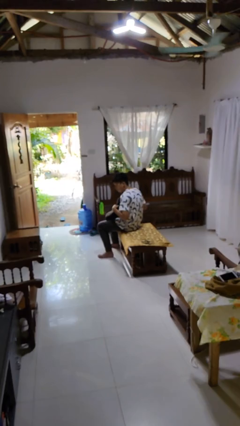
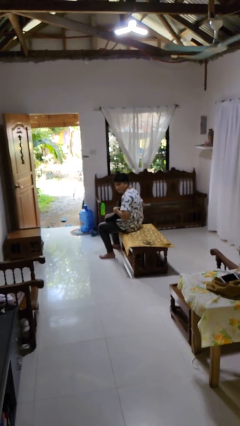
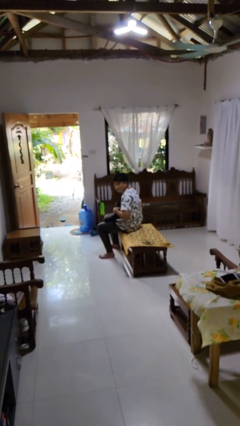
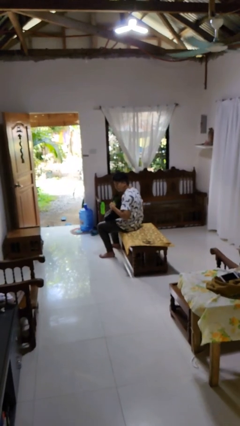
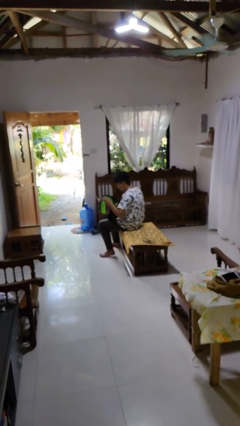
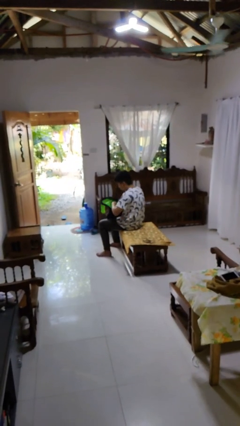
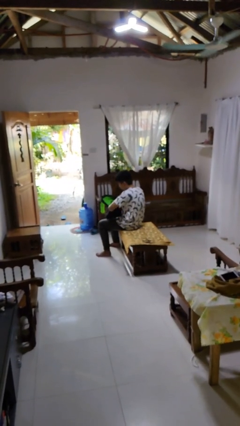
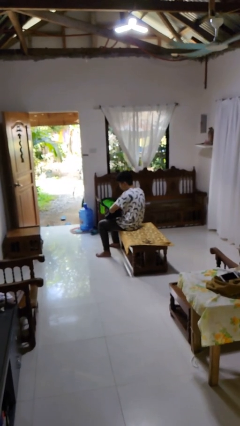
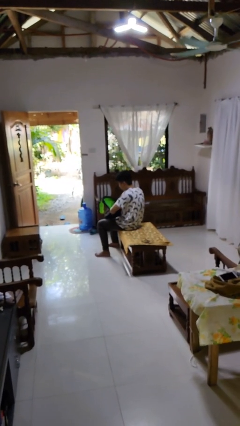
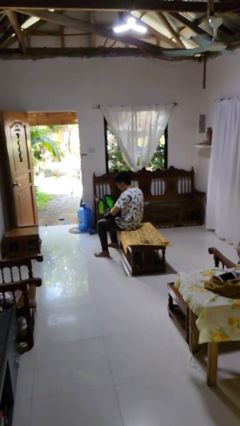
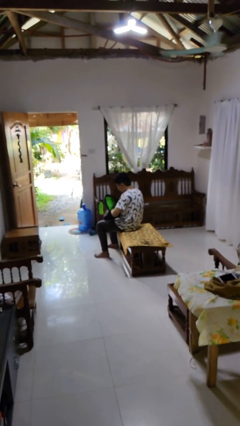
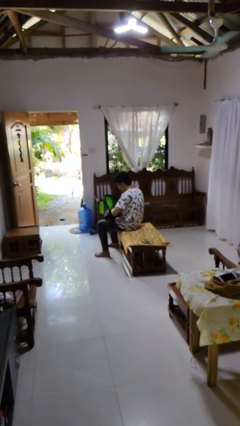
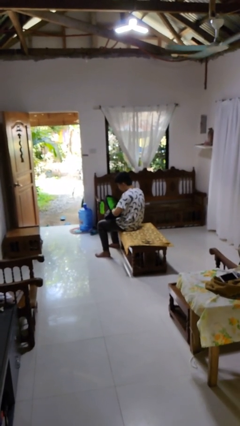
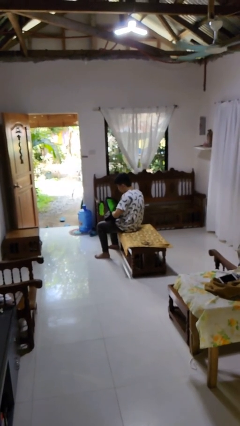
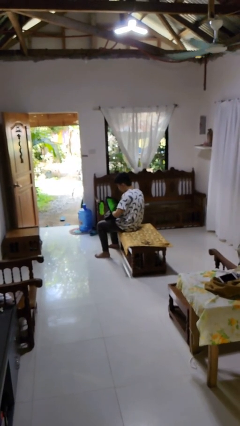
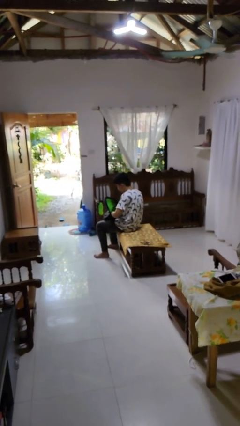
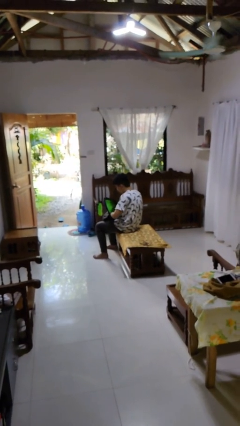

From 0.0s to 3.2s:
person searches in backpack

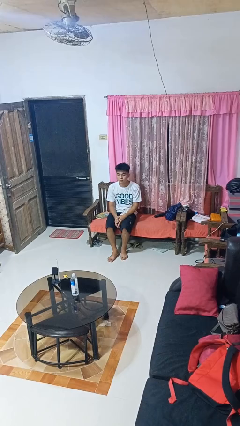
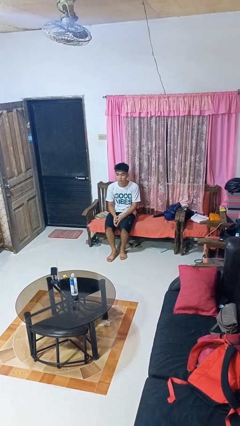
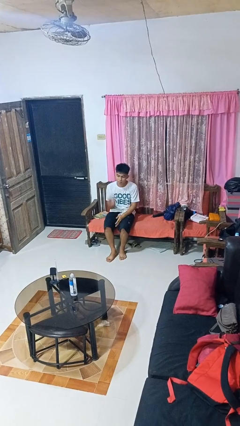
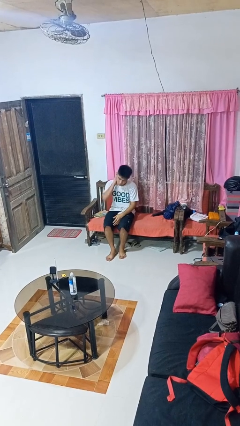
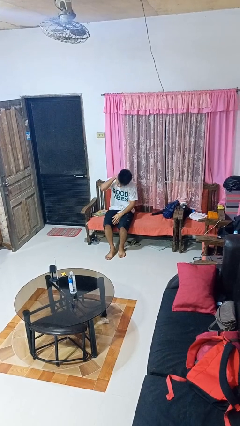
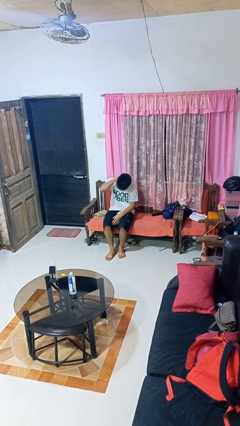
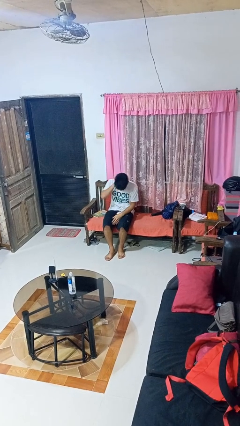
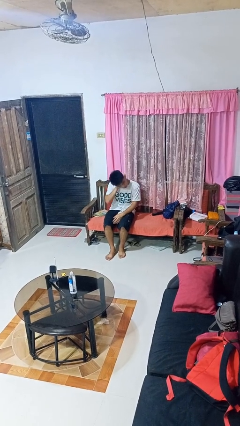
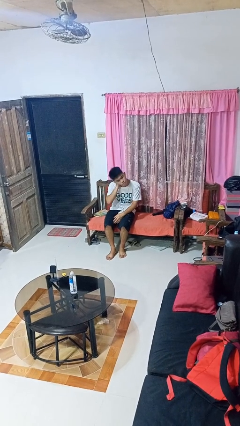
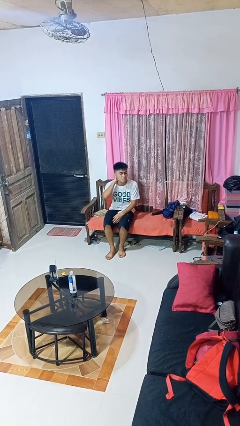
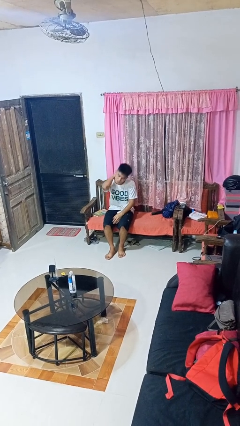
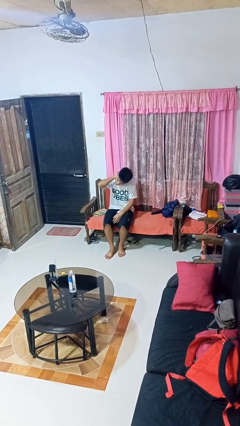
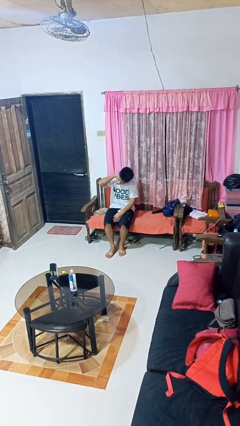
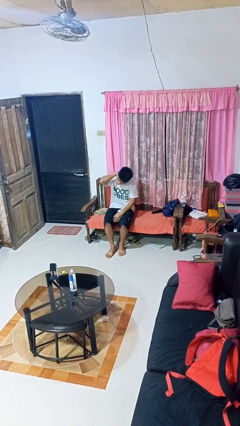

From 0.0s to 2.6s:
person rubs neck

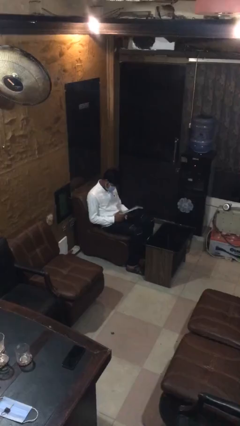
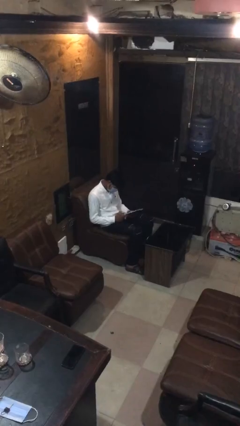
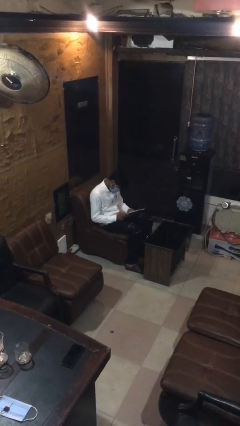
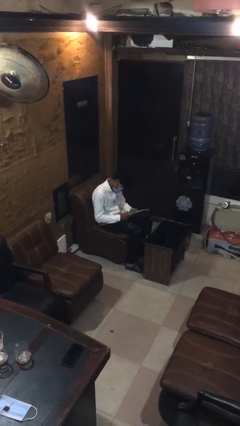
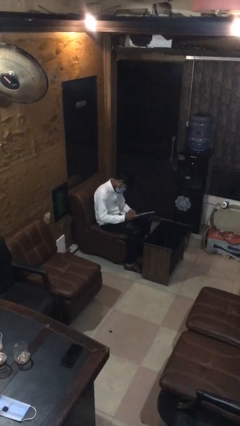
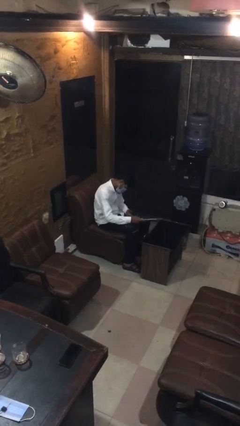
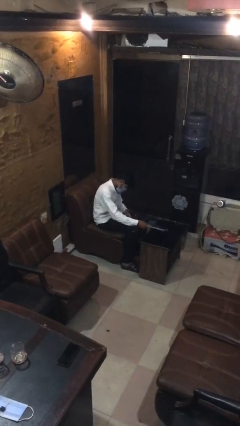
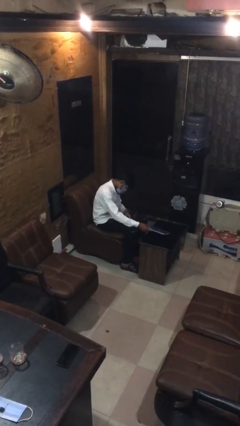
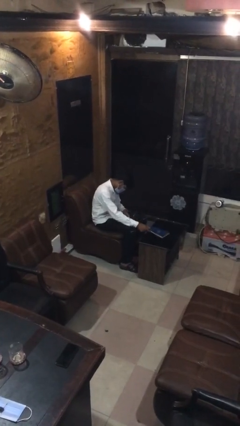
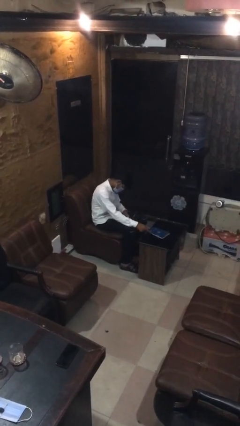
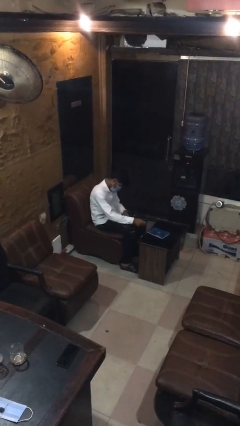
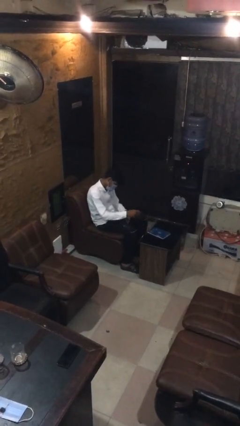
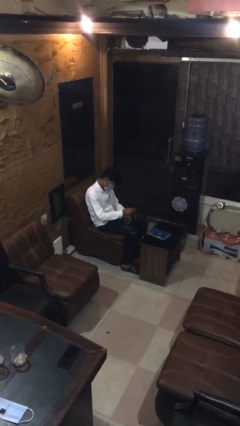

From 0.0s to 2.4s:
person puts down object on table

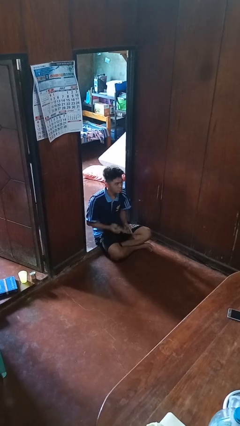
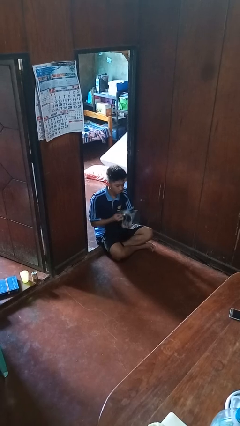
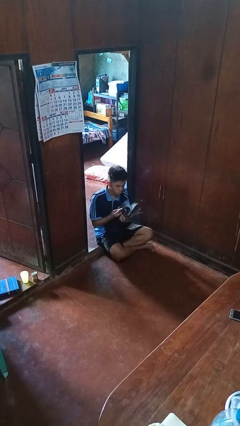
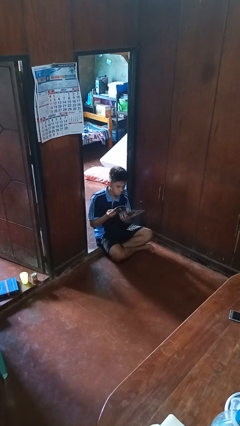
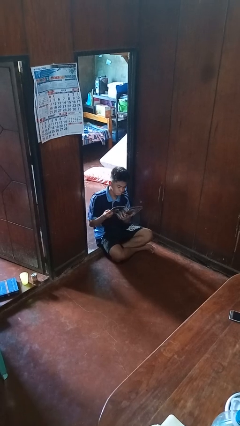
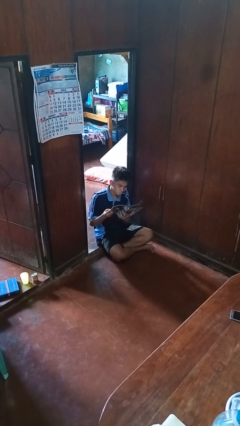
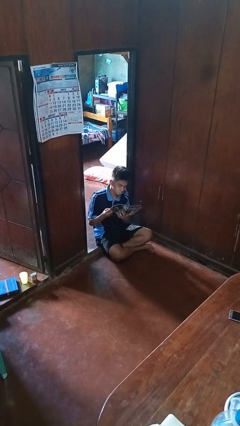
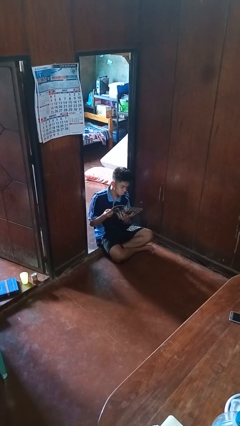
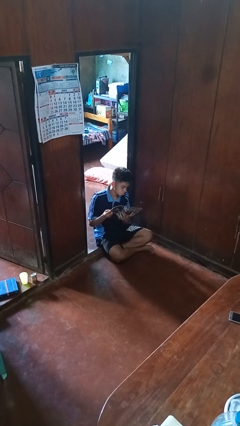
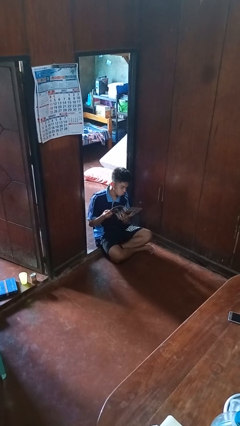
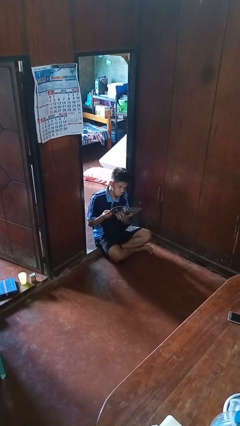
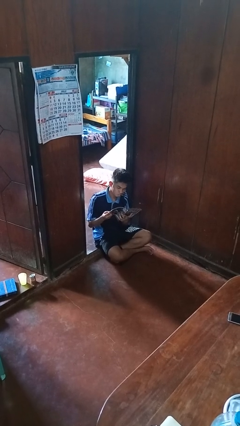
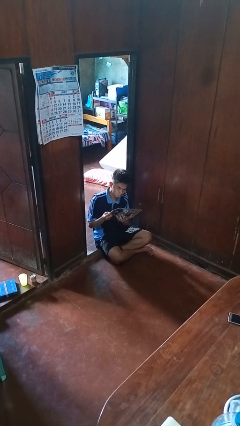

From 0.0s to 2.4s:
person reads magazine

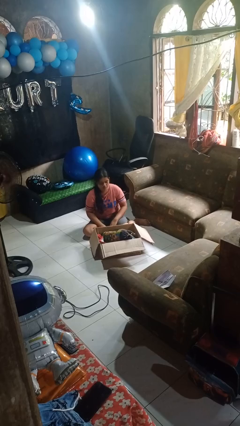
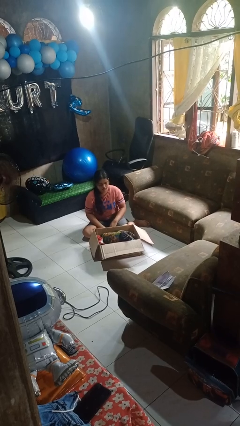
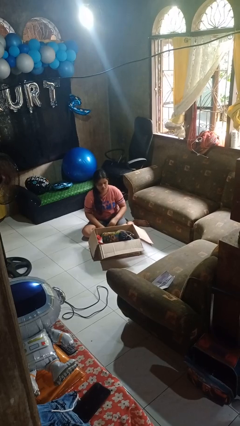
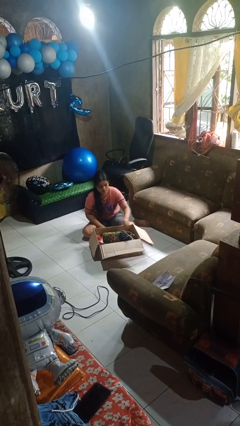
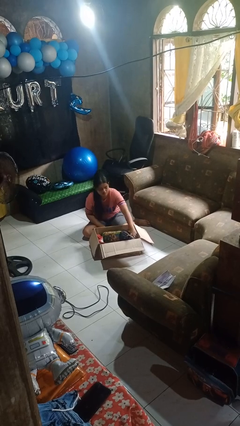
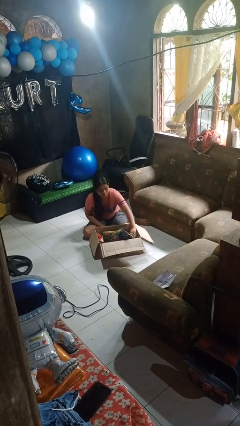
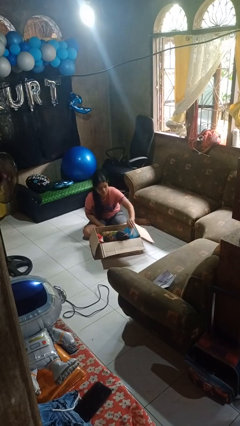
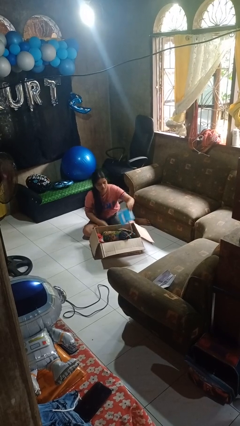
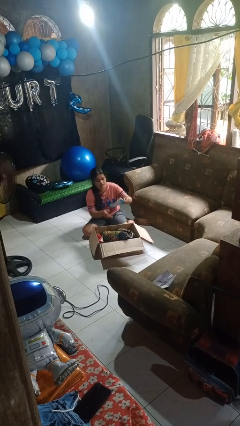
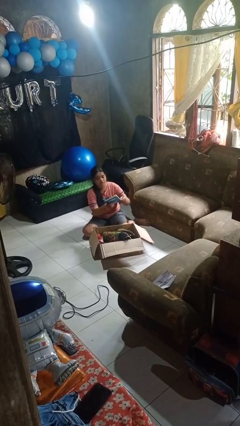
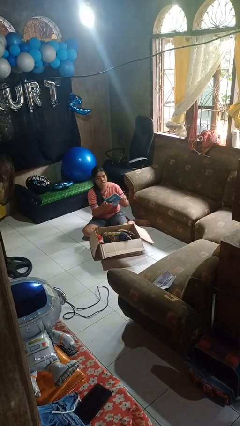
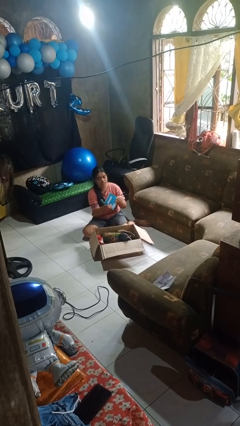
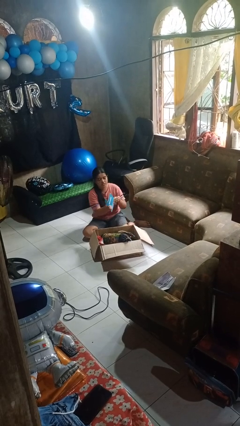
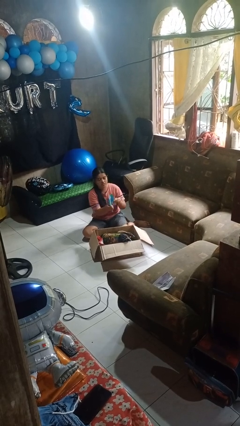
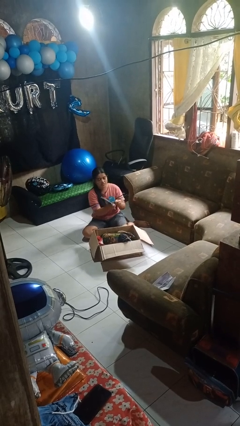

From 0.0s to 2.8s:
person takes object from box

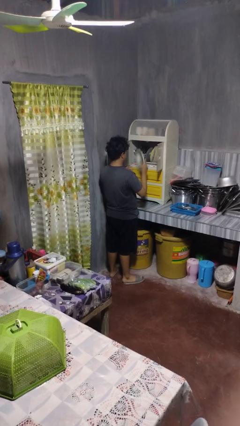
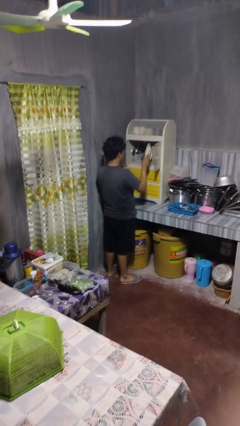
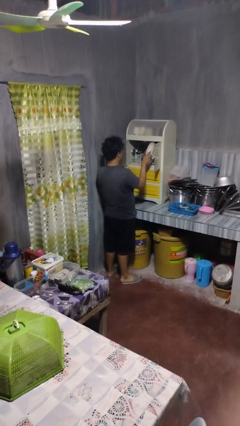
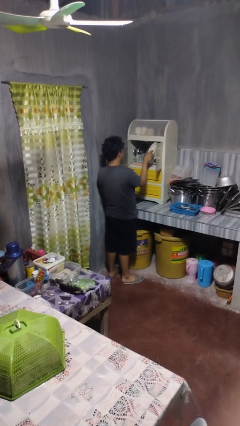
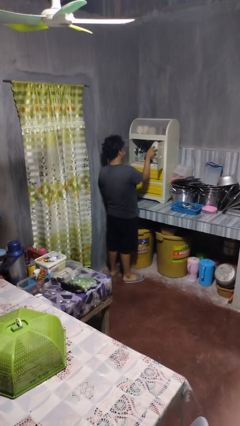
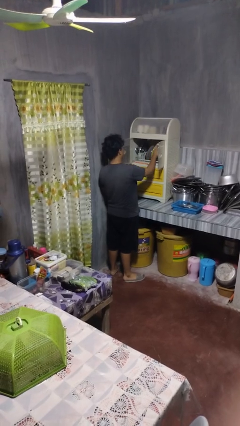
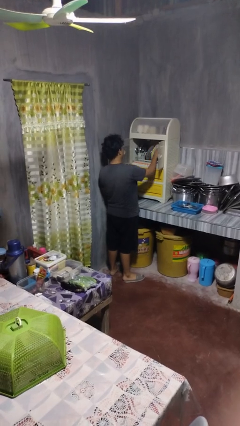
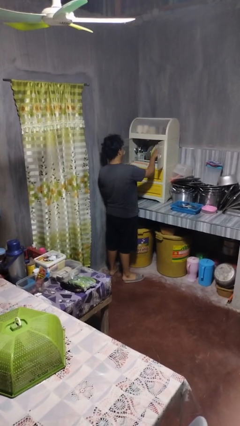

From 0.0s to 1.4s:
person puts down object into cabinet

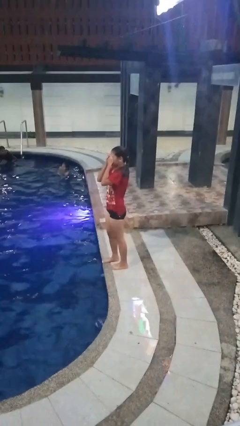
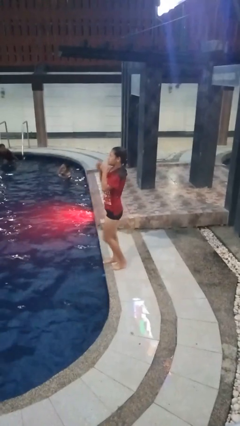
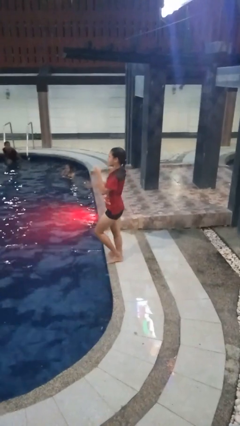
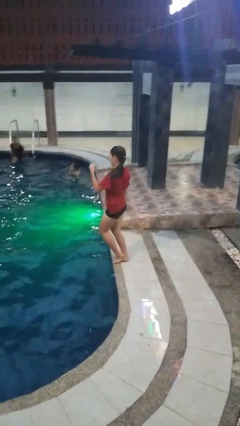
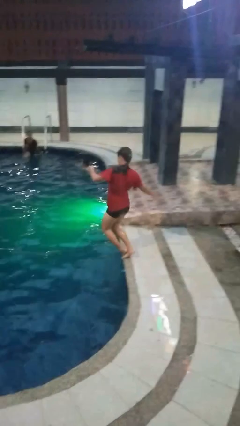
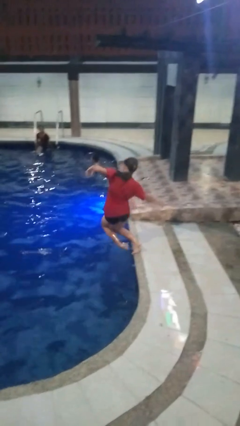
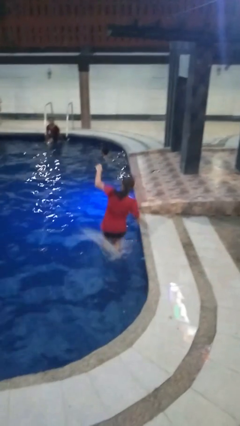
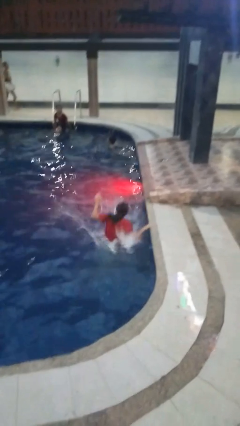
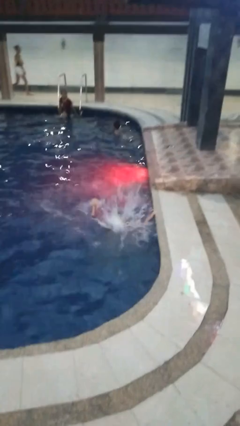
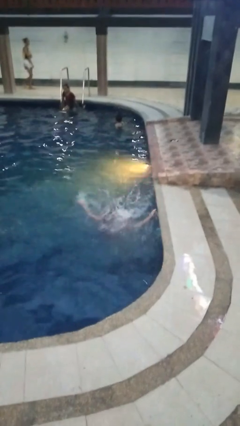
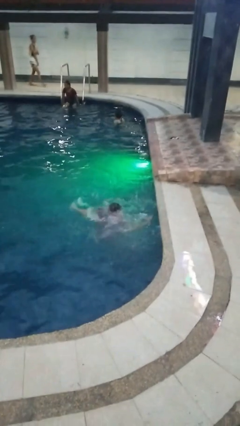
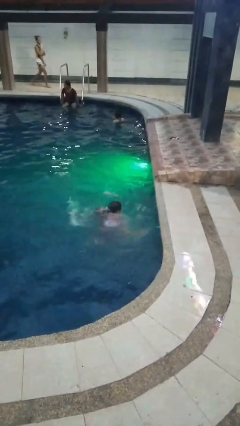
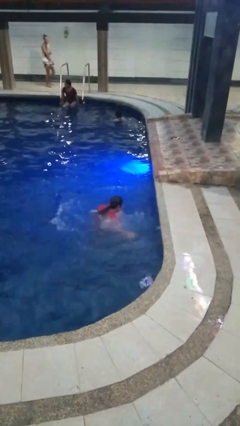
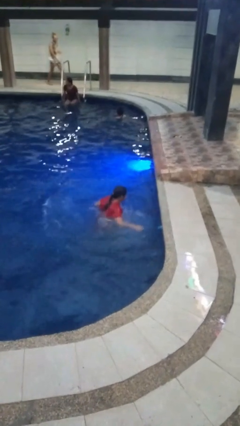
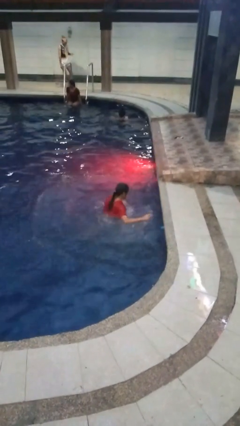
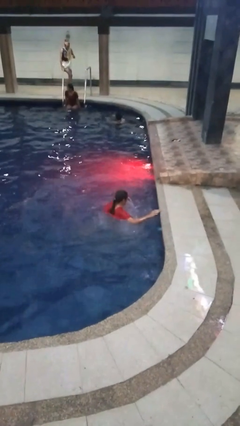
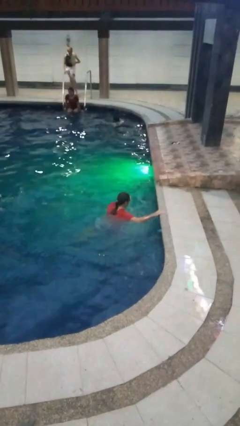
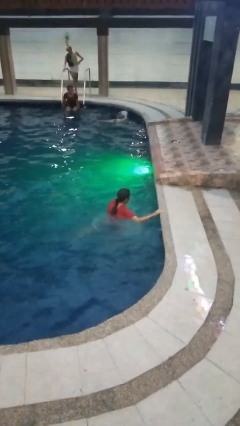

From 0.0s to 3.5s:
person falls into pool
